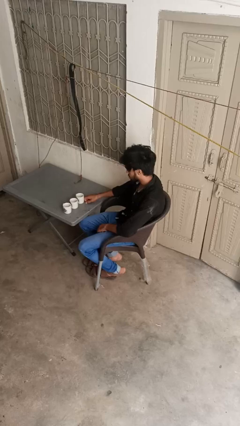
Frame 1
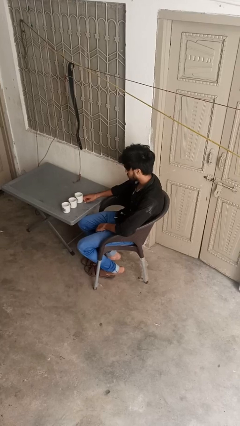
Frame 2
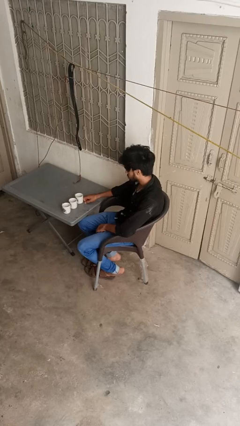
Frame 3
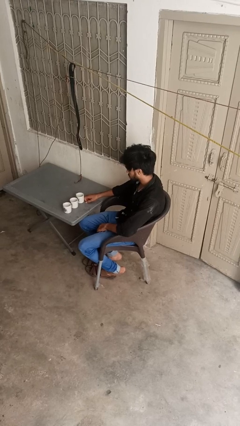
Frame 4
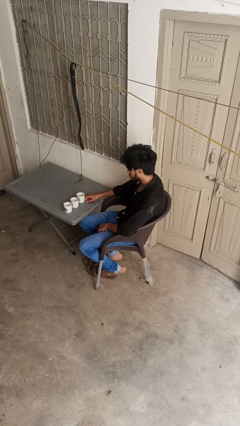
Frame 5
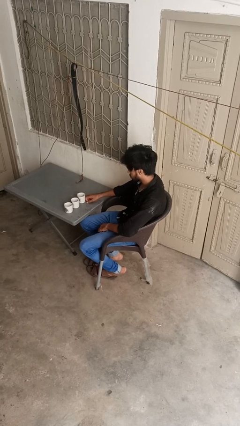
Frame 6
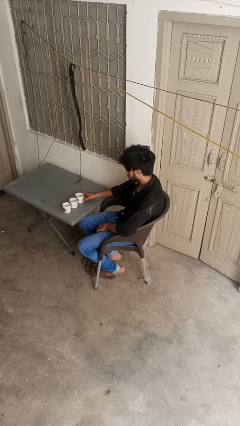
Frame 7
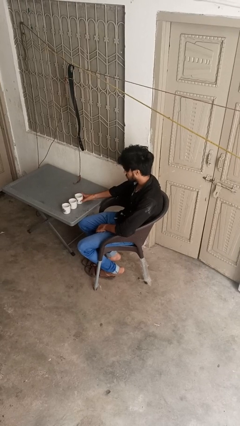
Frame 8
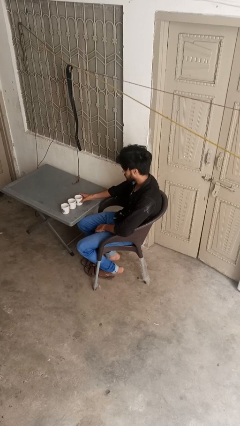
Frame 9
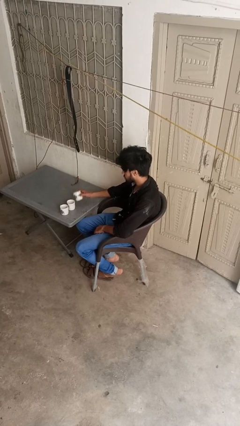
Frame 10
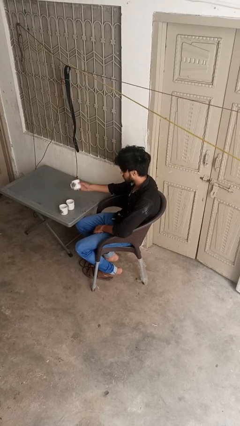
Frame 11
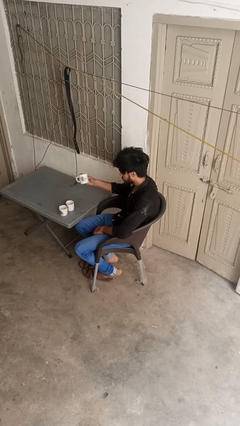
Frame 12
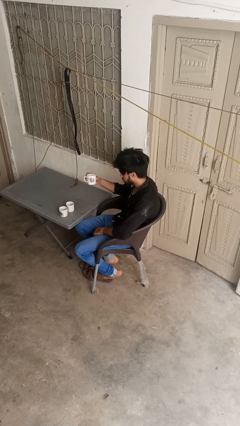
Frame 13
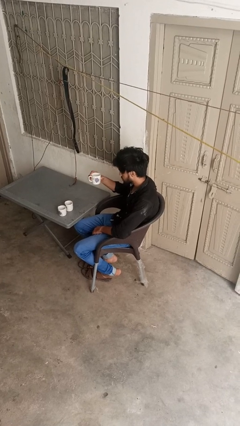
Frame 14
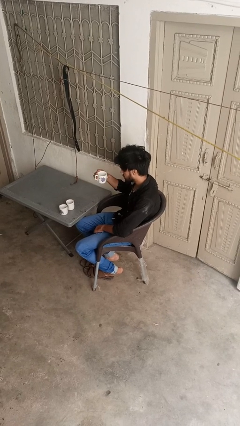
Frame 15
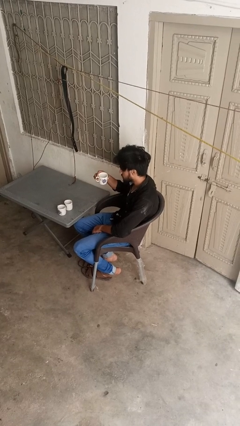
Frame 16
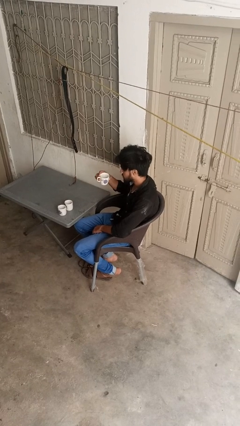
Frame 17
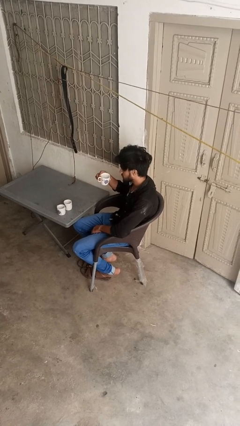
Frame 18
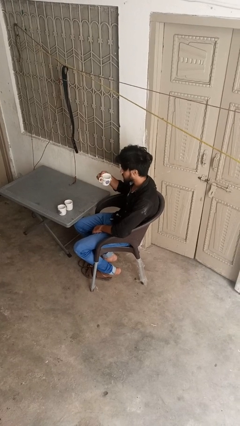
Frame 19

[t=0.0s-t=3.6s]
person picks up object from table

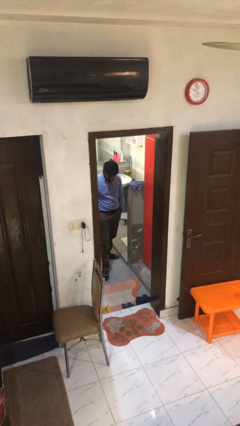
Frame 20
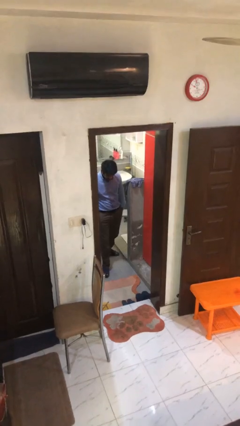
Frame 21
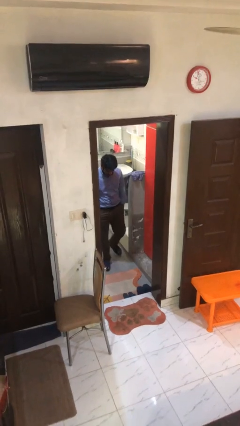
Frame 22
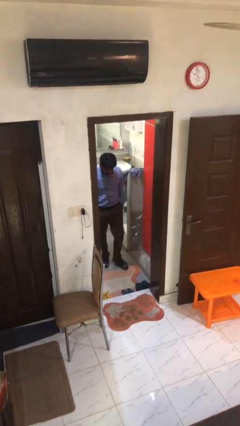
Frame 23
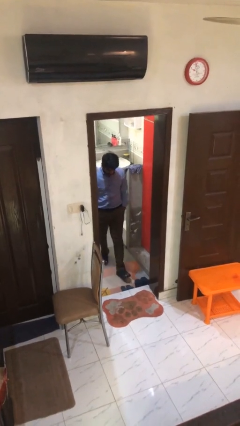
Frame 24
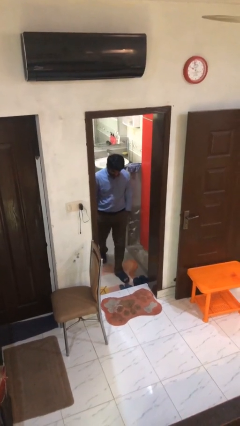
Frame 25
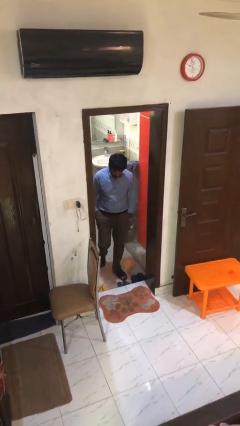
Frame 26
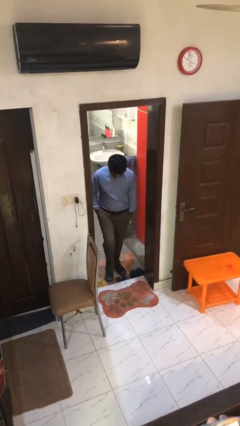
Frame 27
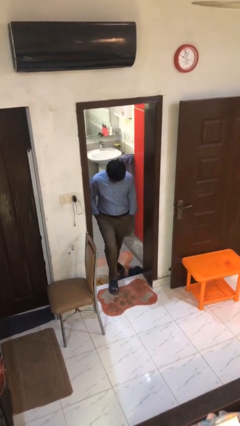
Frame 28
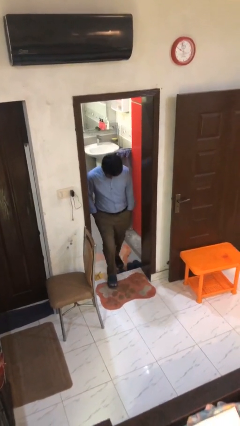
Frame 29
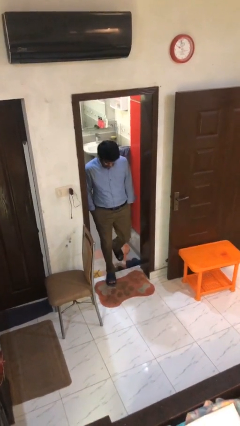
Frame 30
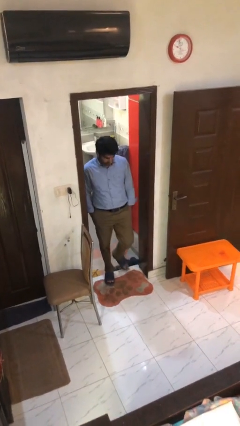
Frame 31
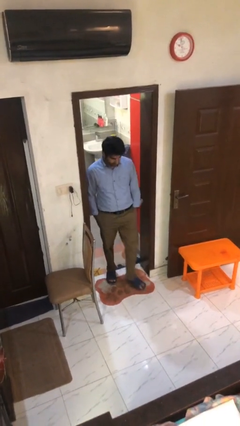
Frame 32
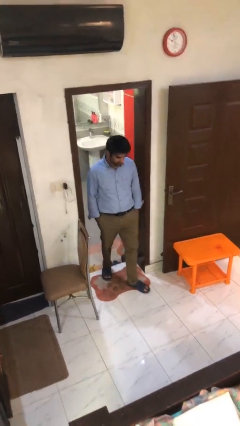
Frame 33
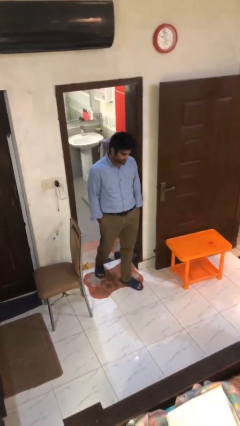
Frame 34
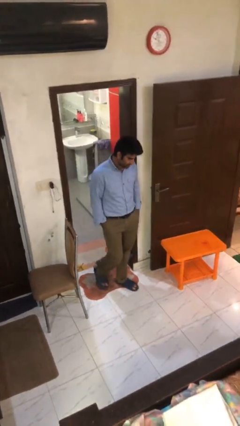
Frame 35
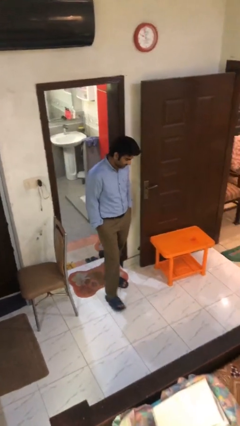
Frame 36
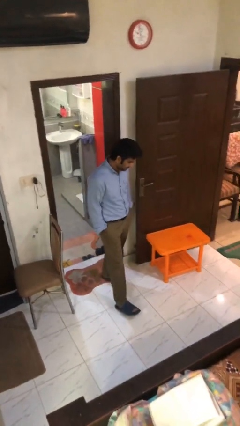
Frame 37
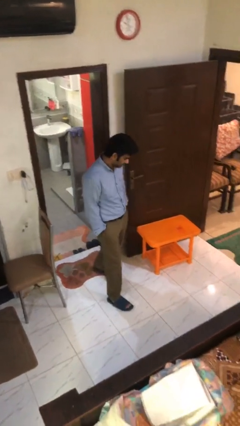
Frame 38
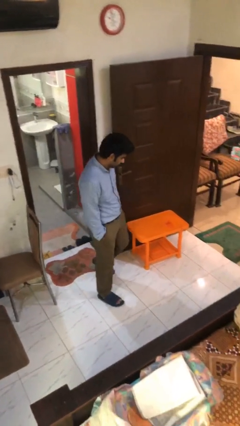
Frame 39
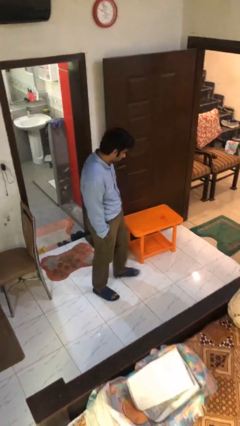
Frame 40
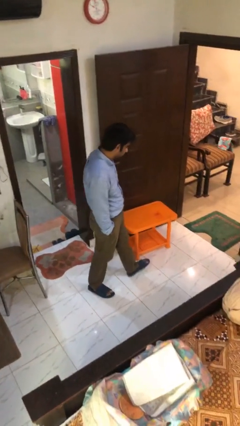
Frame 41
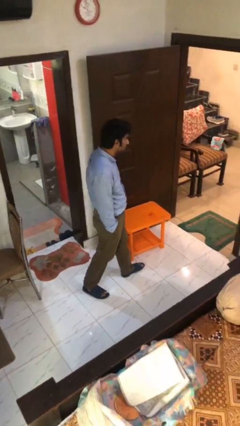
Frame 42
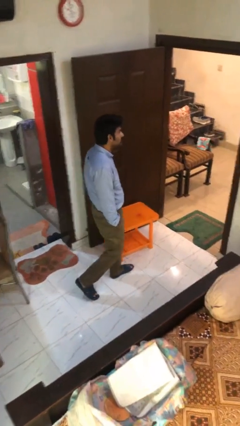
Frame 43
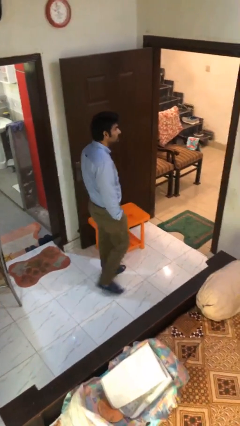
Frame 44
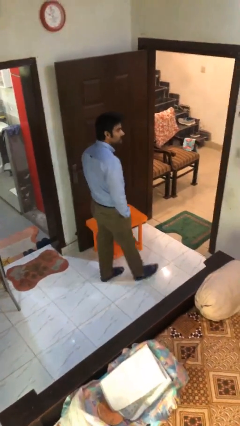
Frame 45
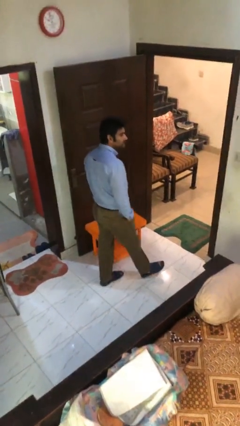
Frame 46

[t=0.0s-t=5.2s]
person enters scene through structure

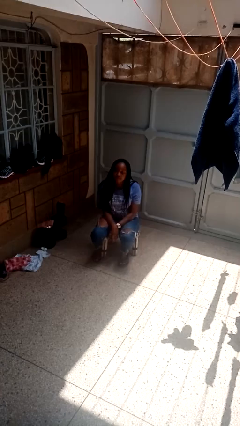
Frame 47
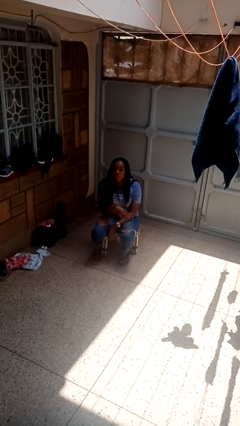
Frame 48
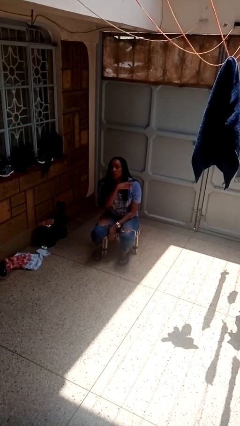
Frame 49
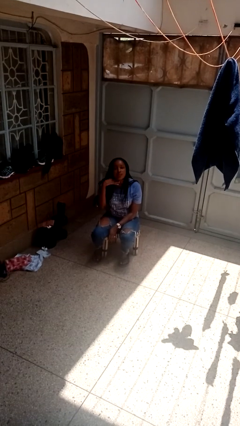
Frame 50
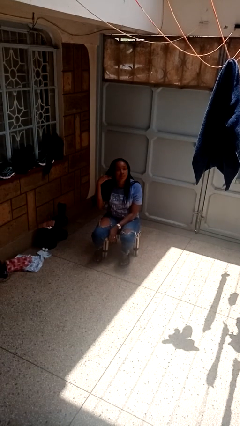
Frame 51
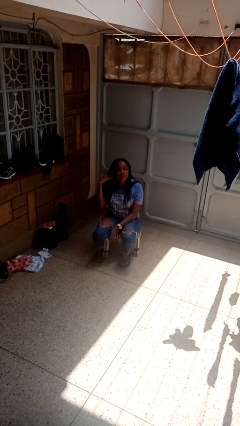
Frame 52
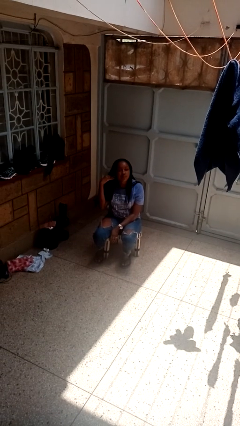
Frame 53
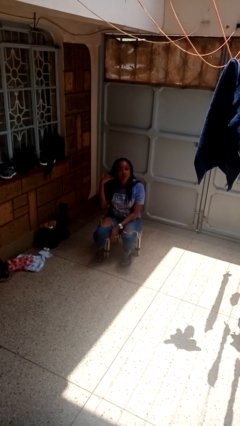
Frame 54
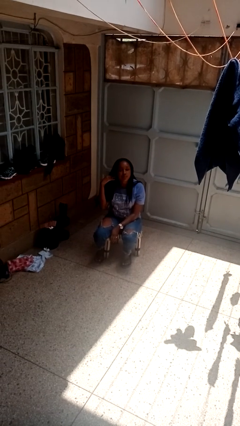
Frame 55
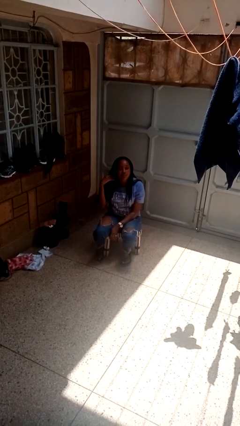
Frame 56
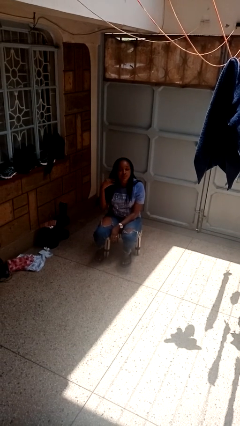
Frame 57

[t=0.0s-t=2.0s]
person gestures cut

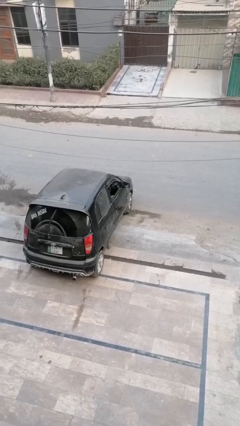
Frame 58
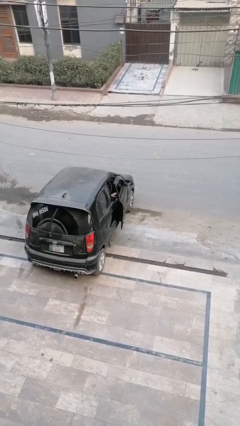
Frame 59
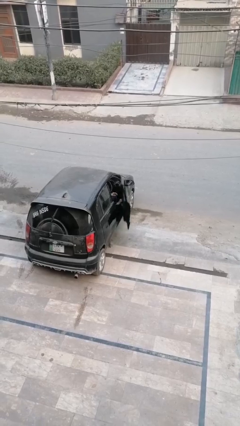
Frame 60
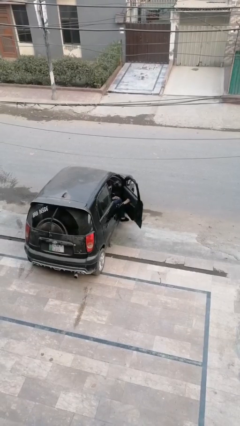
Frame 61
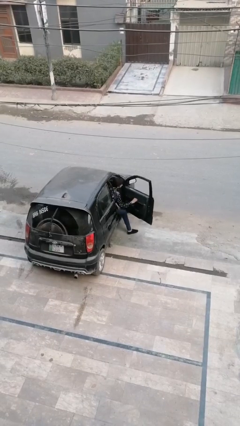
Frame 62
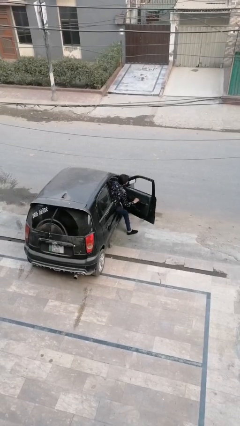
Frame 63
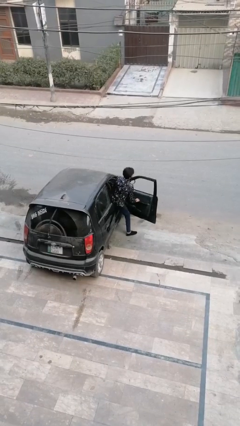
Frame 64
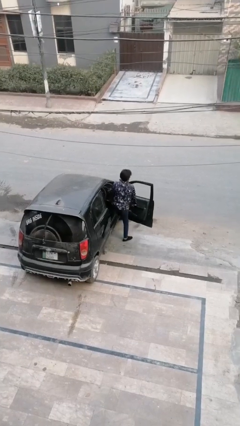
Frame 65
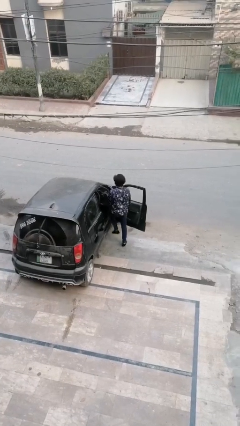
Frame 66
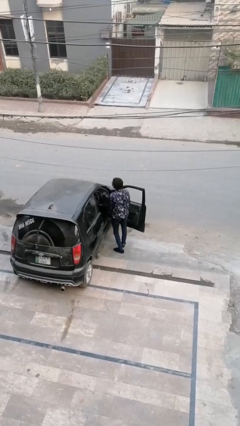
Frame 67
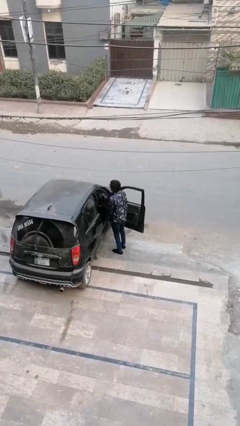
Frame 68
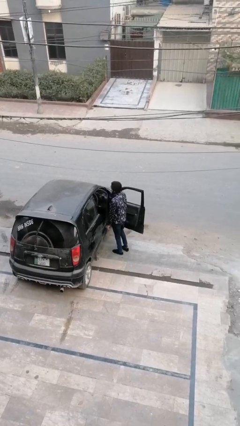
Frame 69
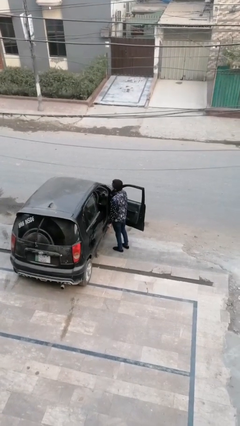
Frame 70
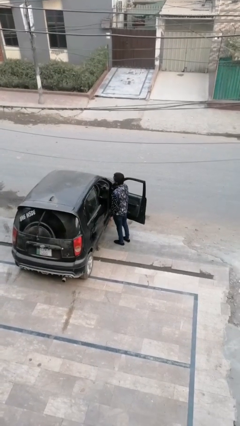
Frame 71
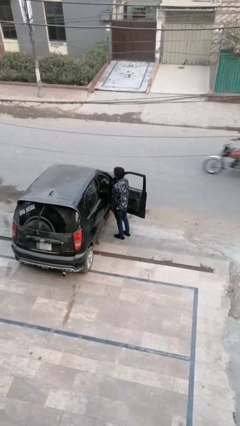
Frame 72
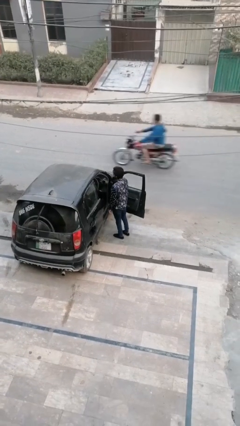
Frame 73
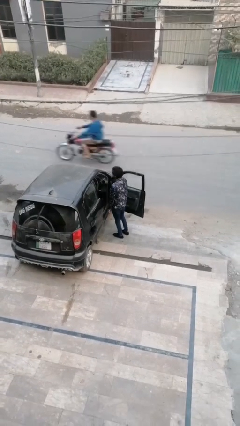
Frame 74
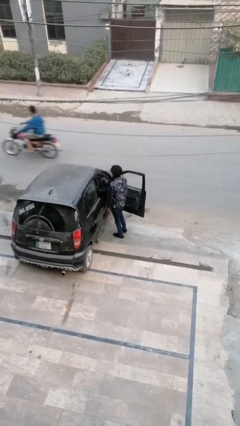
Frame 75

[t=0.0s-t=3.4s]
person exits car

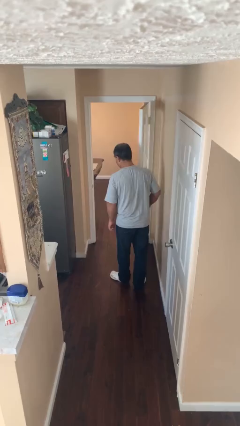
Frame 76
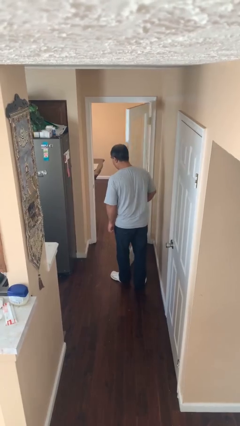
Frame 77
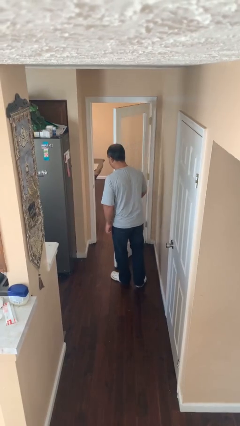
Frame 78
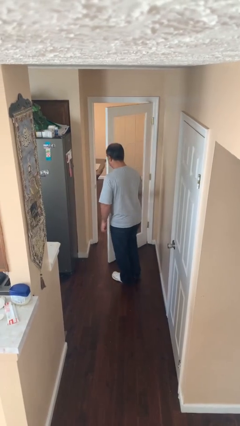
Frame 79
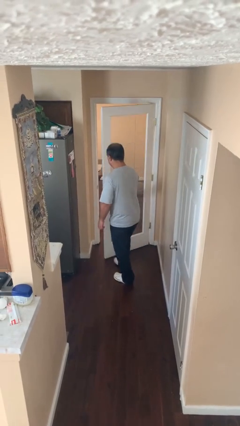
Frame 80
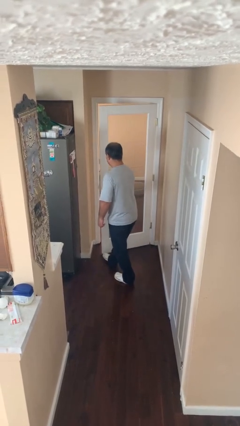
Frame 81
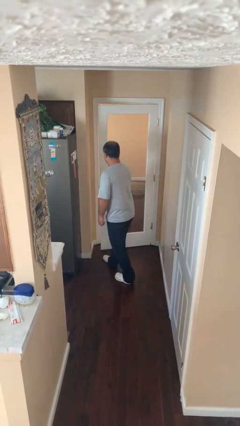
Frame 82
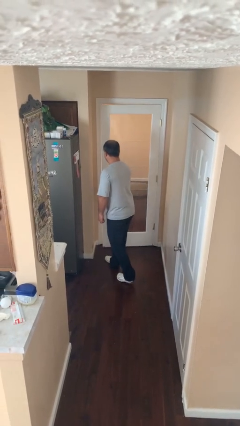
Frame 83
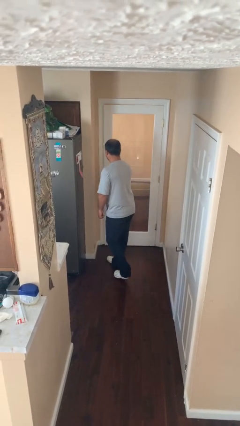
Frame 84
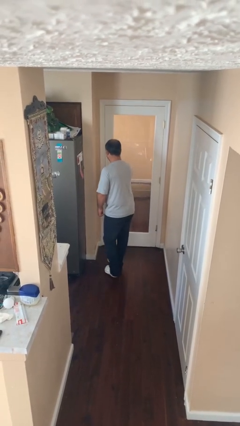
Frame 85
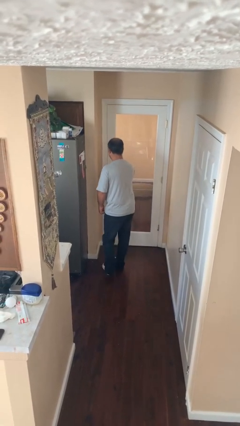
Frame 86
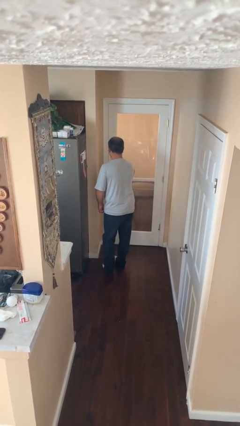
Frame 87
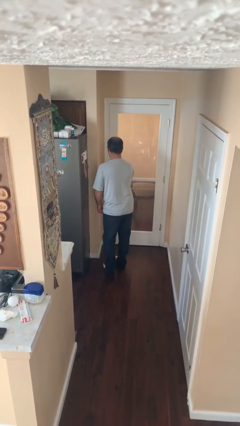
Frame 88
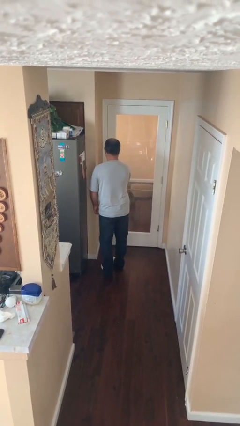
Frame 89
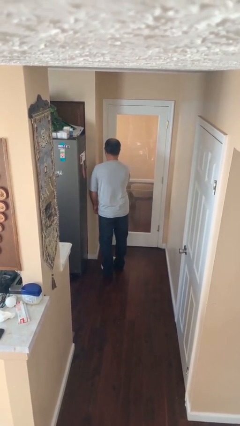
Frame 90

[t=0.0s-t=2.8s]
person closes facility door

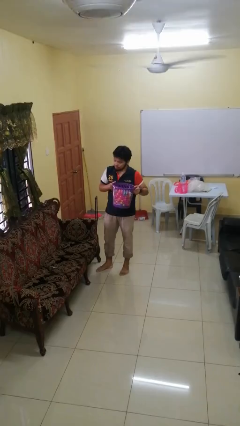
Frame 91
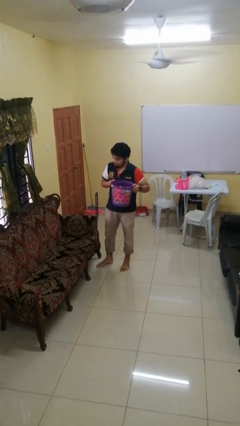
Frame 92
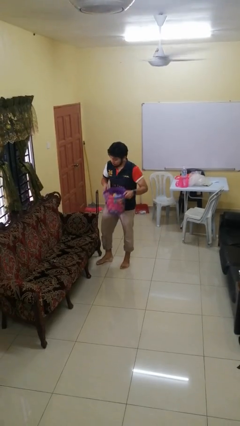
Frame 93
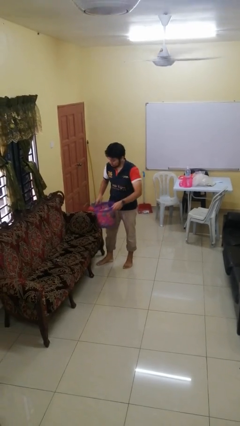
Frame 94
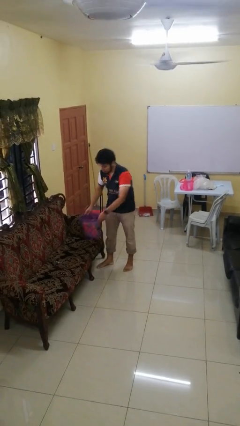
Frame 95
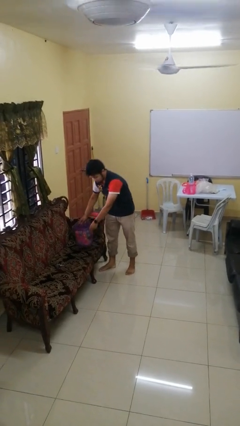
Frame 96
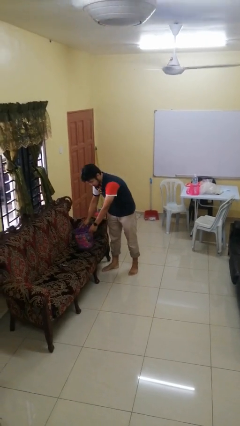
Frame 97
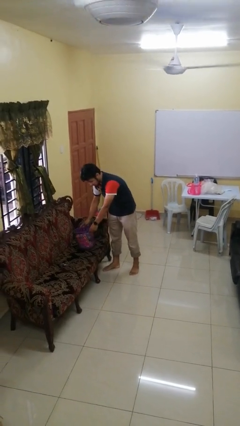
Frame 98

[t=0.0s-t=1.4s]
person puts down object on couch
